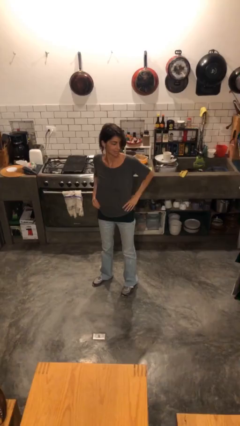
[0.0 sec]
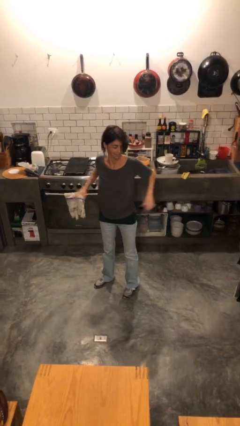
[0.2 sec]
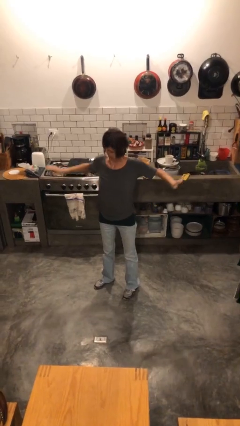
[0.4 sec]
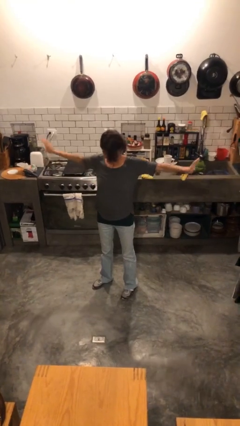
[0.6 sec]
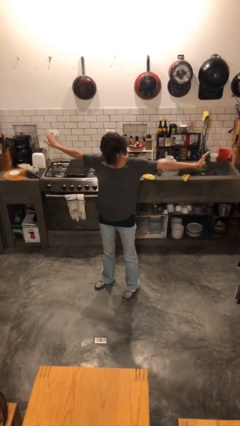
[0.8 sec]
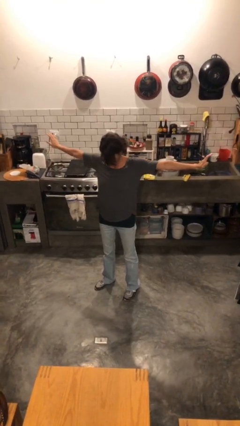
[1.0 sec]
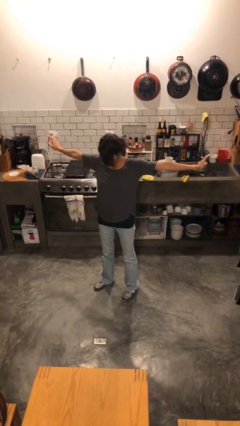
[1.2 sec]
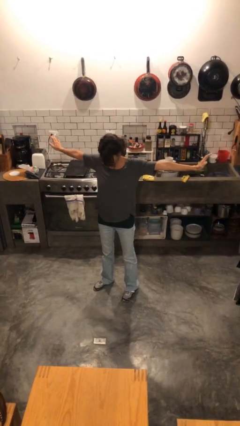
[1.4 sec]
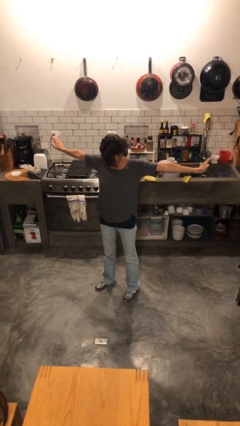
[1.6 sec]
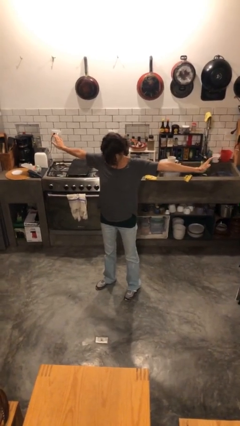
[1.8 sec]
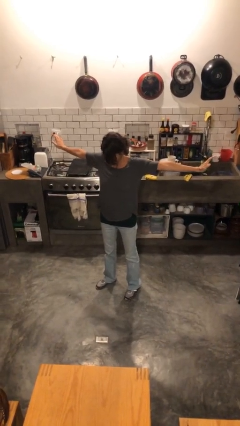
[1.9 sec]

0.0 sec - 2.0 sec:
person stretches arms to side

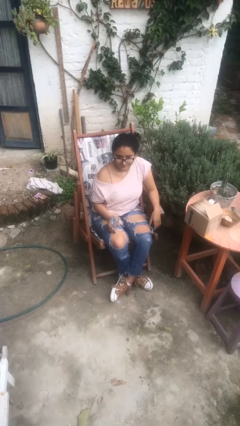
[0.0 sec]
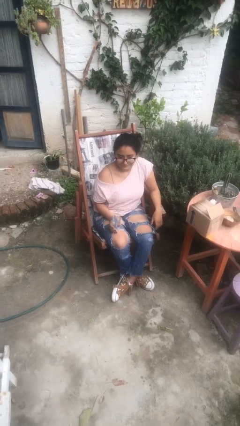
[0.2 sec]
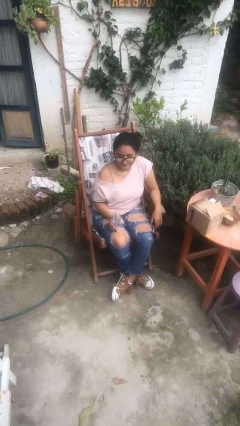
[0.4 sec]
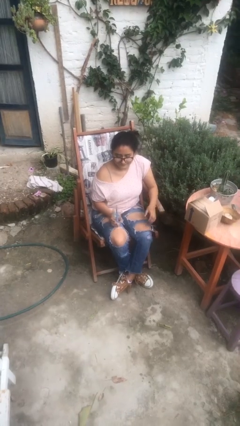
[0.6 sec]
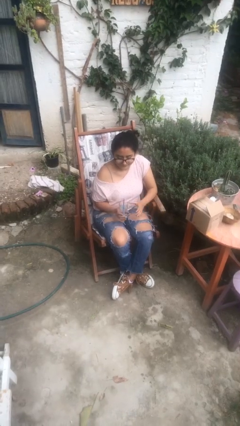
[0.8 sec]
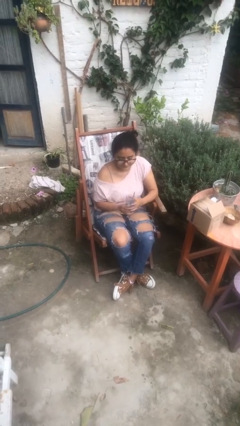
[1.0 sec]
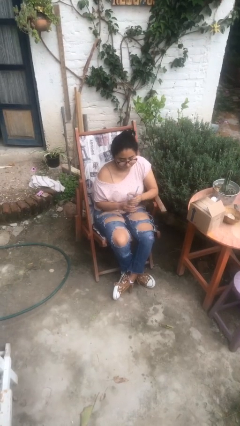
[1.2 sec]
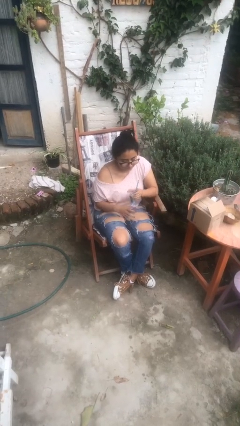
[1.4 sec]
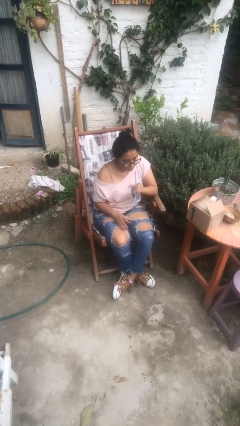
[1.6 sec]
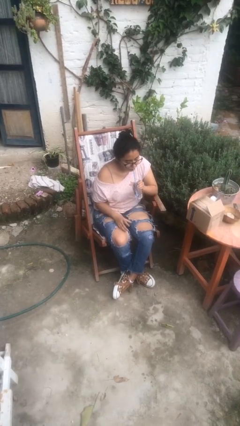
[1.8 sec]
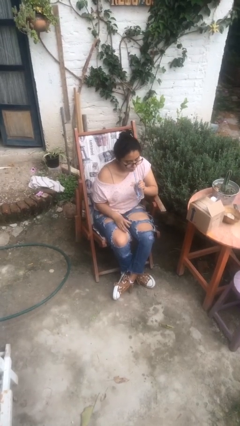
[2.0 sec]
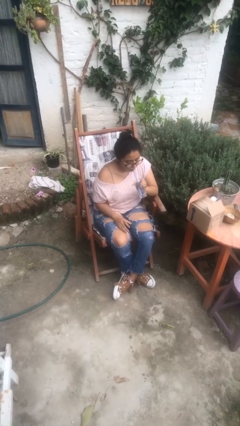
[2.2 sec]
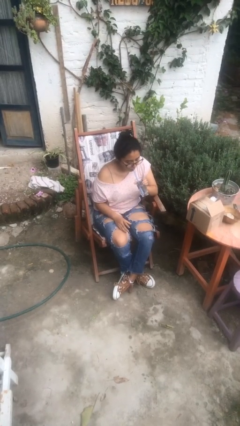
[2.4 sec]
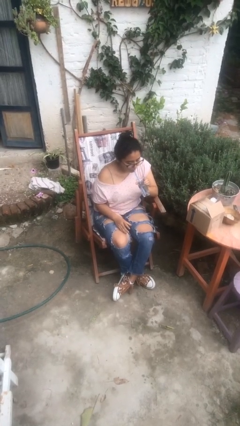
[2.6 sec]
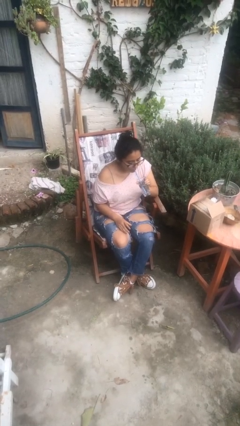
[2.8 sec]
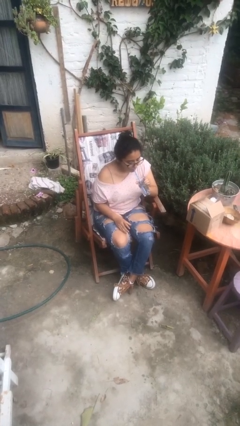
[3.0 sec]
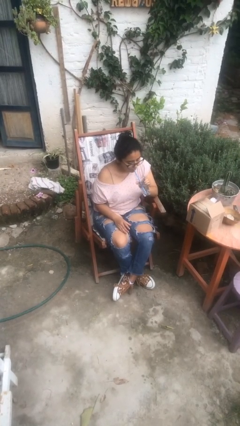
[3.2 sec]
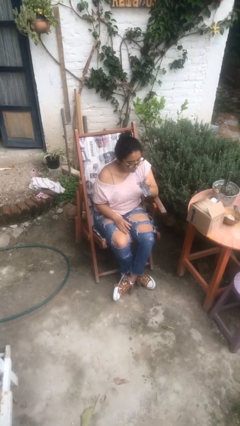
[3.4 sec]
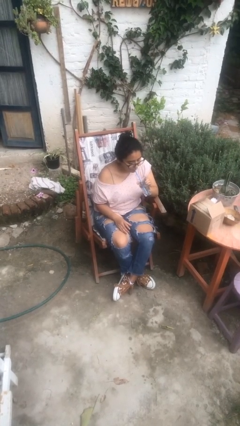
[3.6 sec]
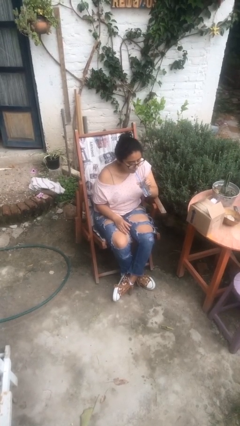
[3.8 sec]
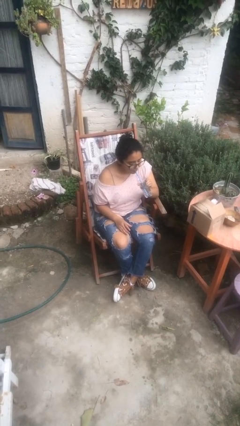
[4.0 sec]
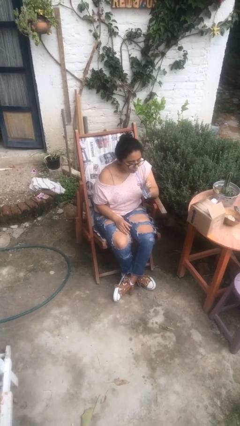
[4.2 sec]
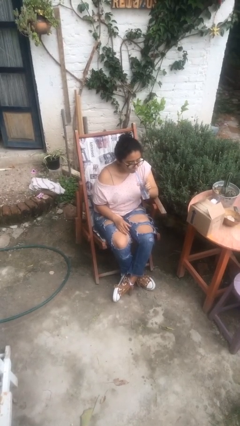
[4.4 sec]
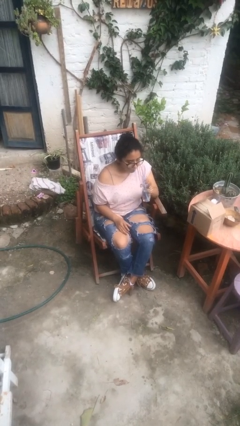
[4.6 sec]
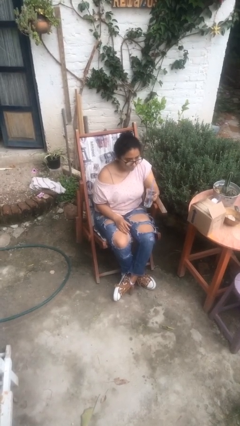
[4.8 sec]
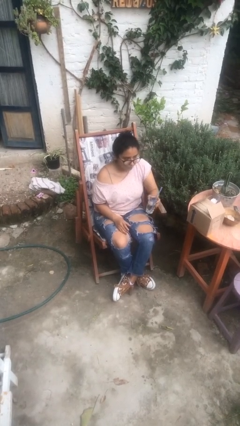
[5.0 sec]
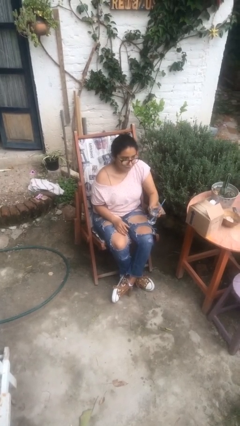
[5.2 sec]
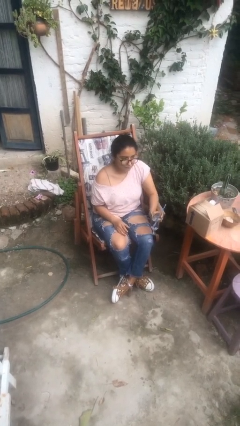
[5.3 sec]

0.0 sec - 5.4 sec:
person drinks from straw

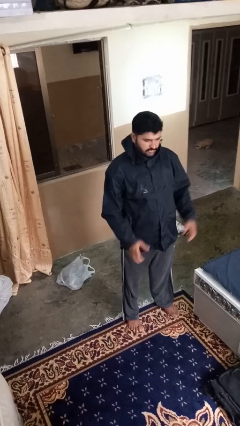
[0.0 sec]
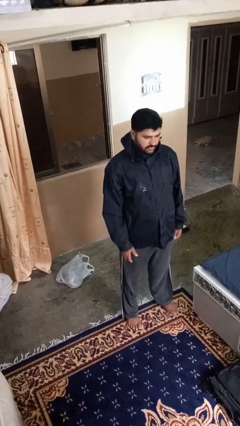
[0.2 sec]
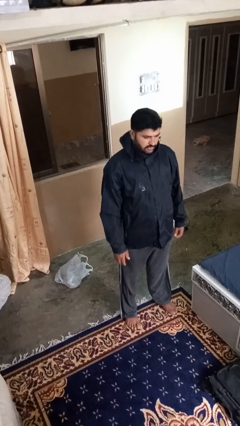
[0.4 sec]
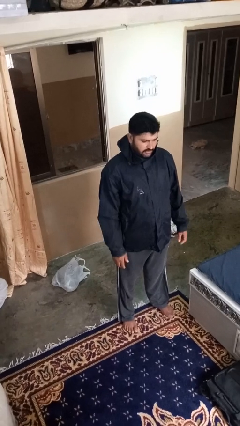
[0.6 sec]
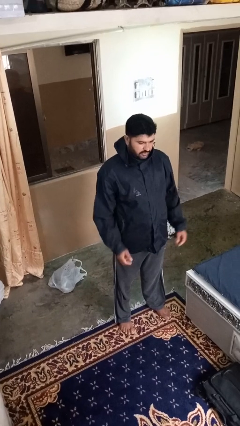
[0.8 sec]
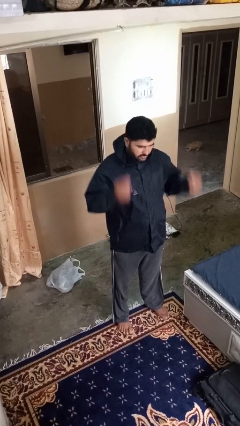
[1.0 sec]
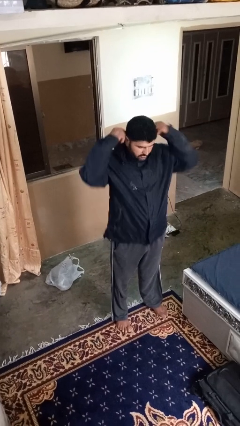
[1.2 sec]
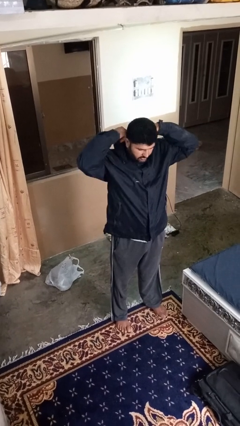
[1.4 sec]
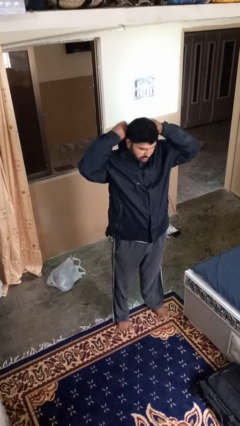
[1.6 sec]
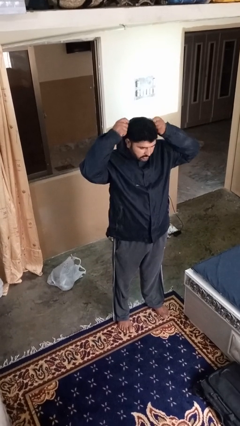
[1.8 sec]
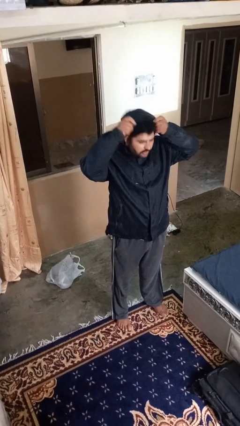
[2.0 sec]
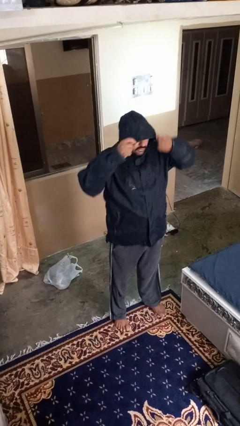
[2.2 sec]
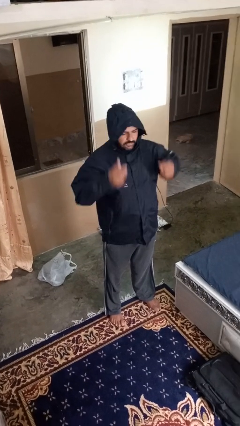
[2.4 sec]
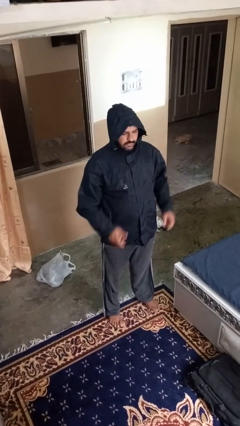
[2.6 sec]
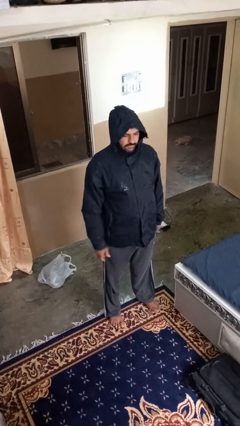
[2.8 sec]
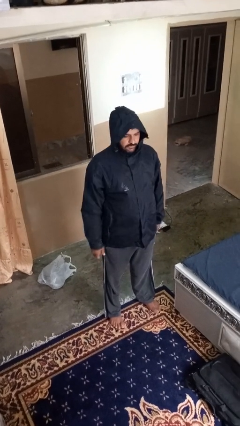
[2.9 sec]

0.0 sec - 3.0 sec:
person puts on hoodie

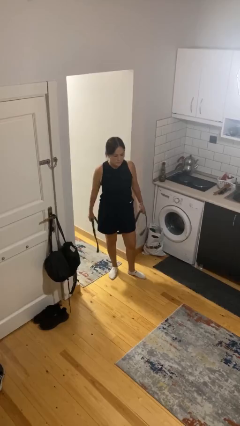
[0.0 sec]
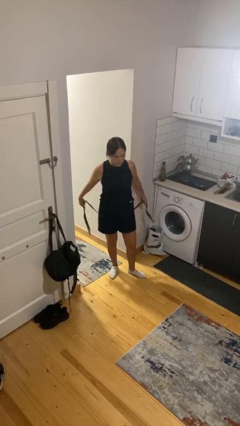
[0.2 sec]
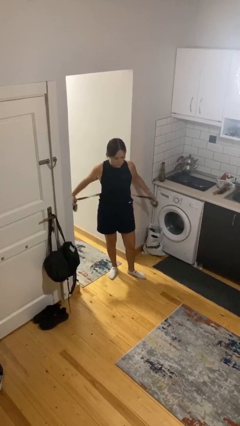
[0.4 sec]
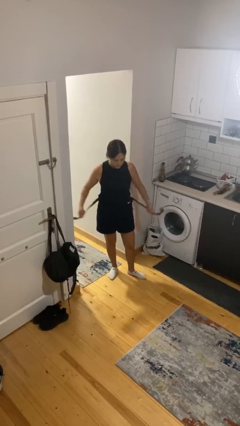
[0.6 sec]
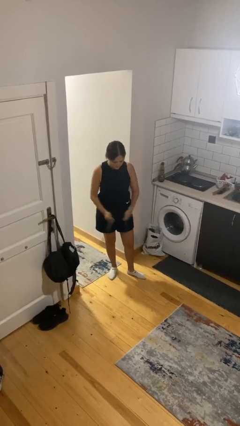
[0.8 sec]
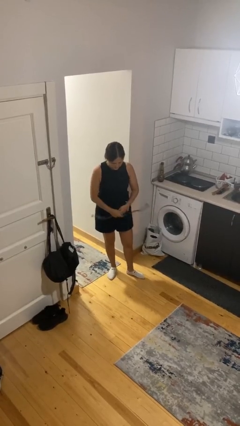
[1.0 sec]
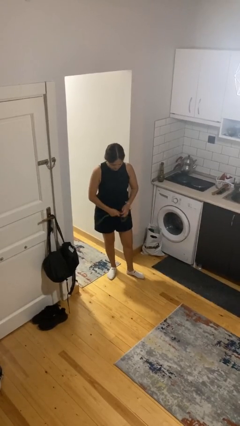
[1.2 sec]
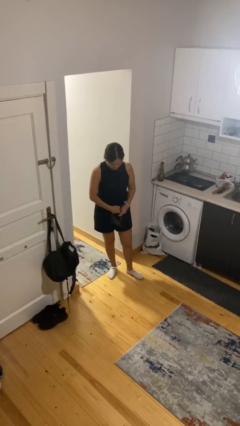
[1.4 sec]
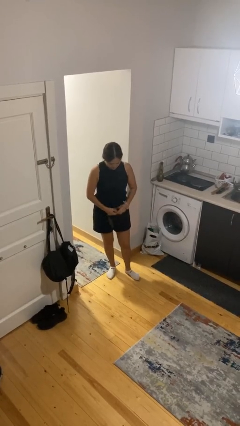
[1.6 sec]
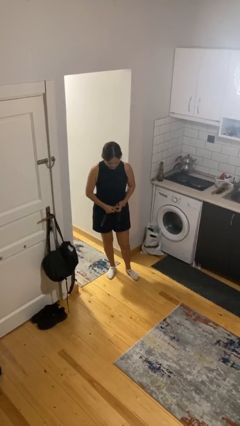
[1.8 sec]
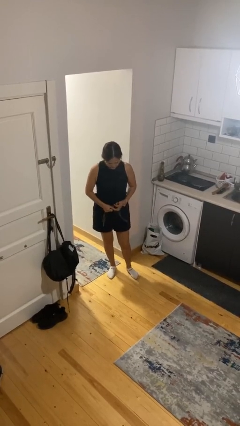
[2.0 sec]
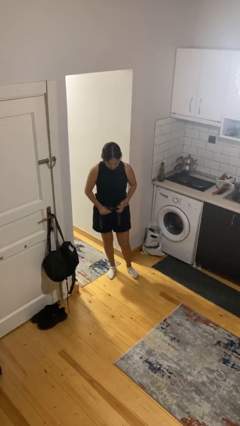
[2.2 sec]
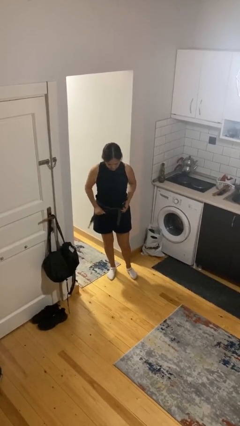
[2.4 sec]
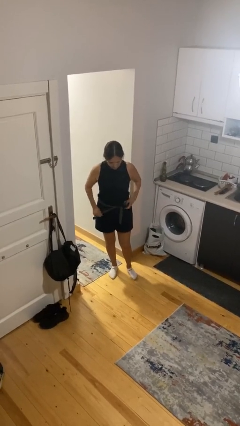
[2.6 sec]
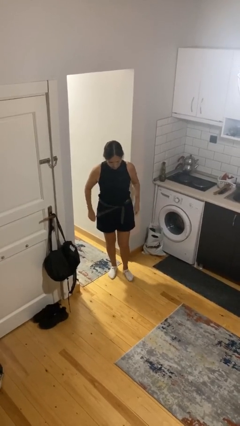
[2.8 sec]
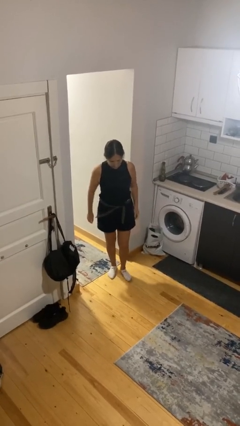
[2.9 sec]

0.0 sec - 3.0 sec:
person puts on belt

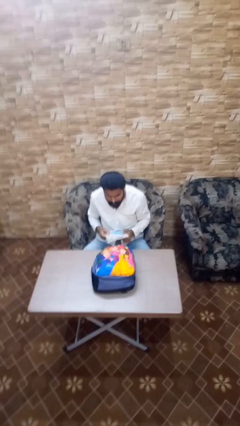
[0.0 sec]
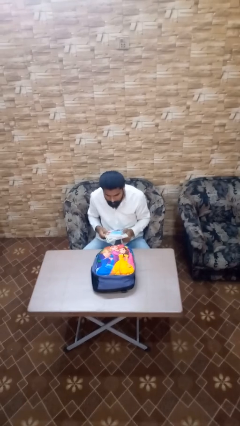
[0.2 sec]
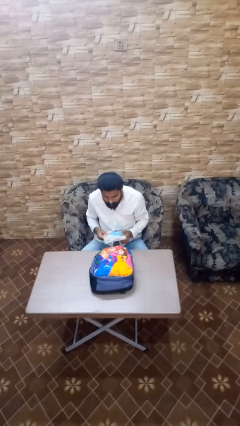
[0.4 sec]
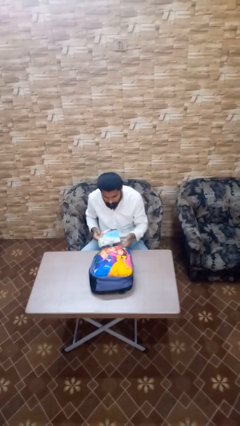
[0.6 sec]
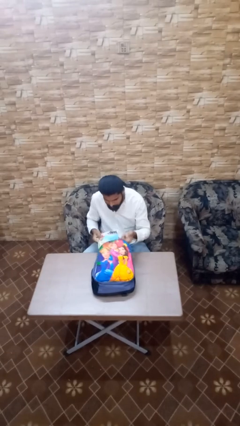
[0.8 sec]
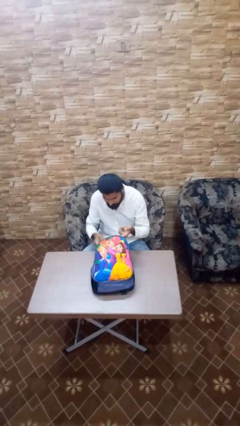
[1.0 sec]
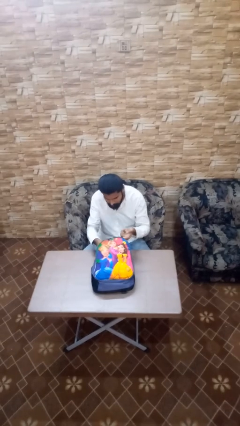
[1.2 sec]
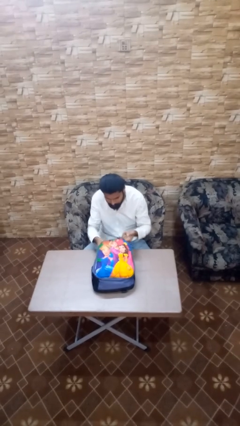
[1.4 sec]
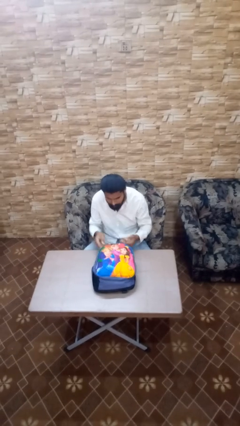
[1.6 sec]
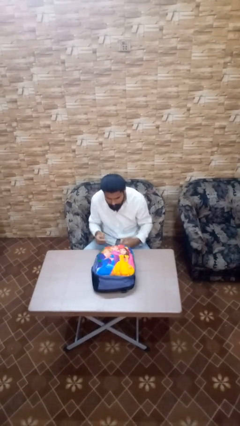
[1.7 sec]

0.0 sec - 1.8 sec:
person puts object into backpack

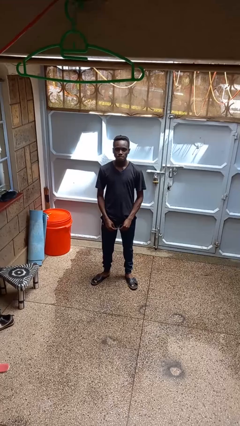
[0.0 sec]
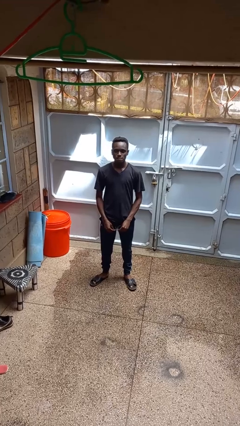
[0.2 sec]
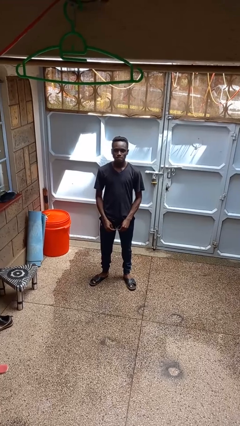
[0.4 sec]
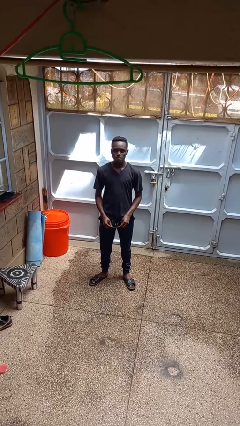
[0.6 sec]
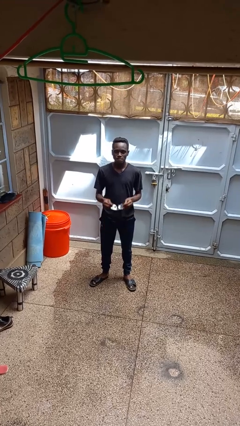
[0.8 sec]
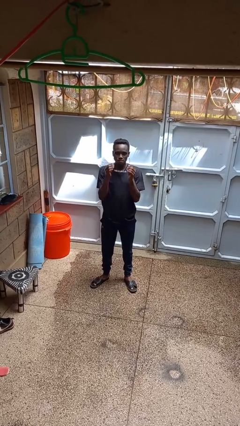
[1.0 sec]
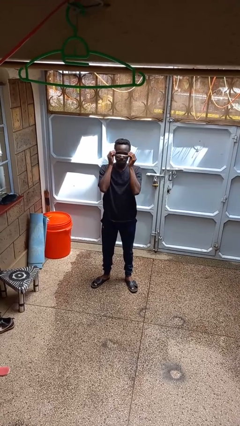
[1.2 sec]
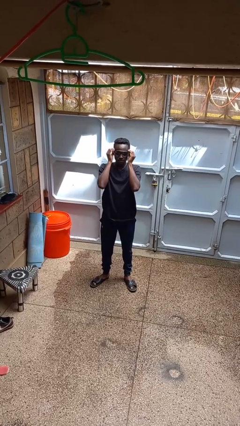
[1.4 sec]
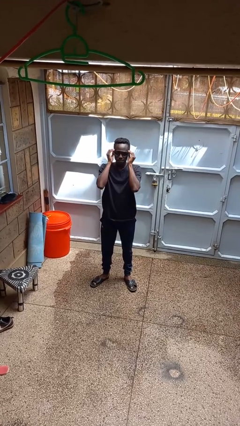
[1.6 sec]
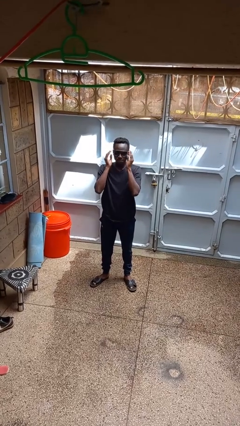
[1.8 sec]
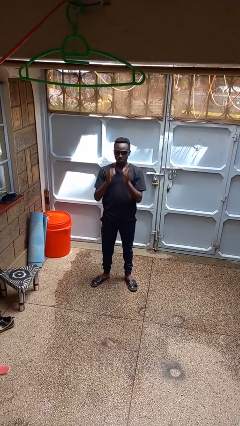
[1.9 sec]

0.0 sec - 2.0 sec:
person puts on sunglasses

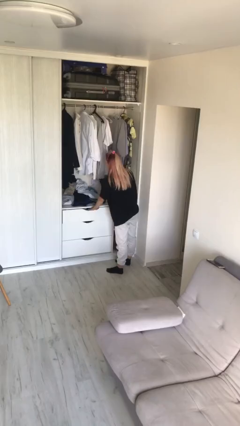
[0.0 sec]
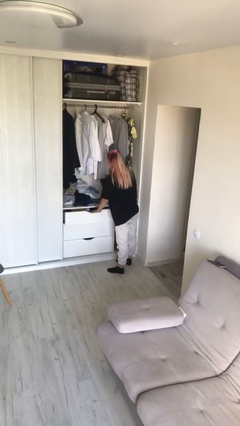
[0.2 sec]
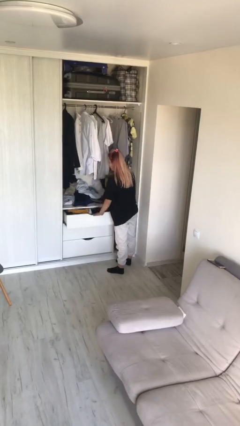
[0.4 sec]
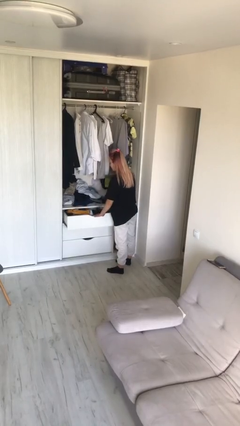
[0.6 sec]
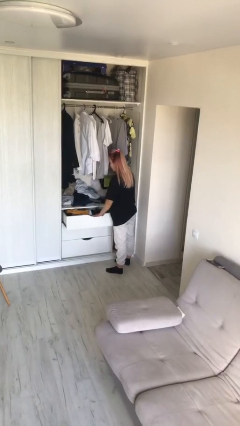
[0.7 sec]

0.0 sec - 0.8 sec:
person opens dresser drawer
